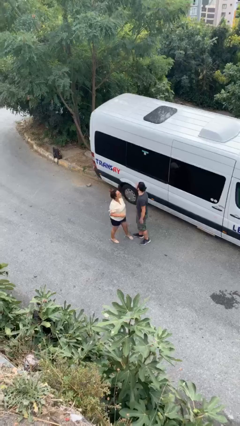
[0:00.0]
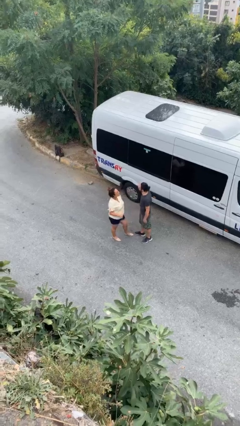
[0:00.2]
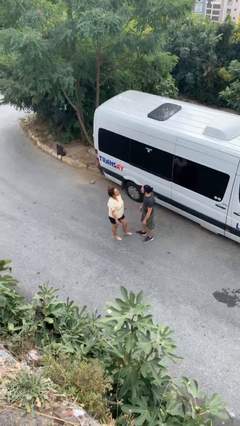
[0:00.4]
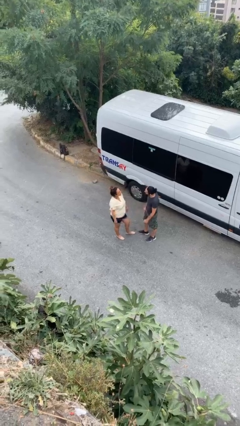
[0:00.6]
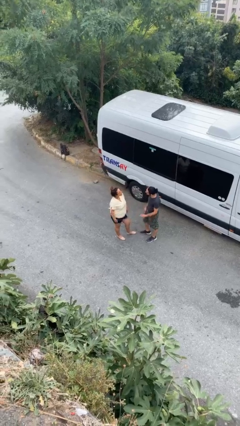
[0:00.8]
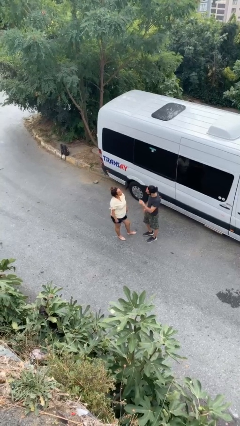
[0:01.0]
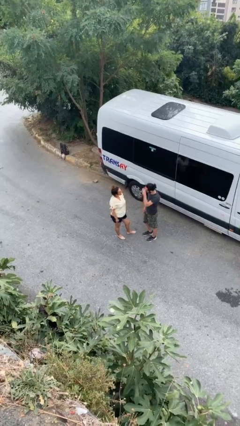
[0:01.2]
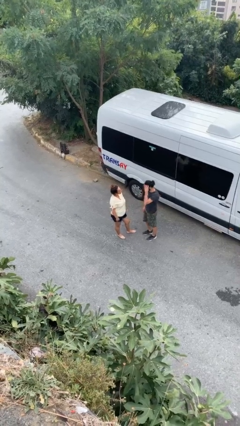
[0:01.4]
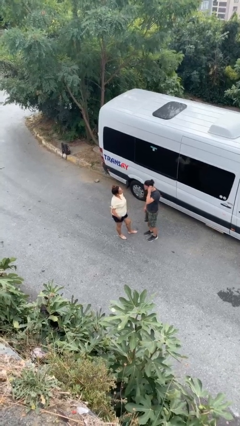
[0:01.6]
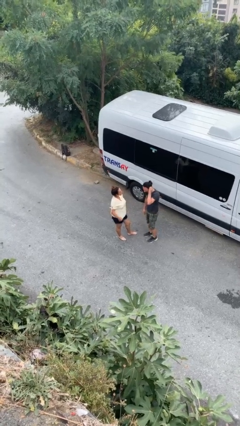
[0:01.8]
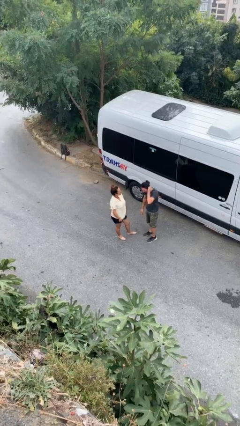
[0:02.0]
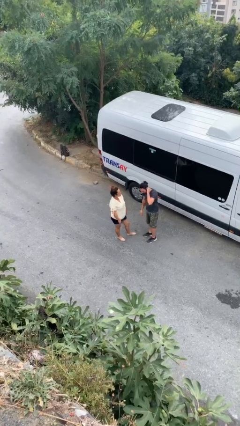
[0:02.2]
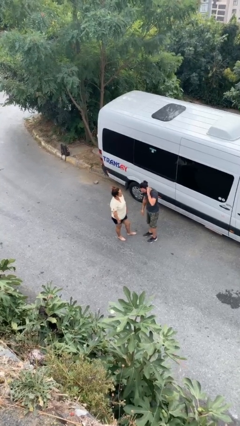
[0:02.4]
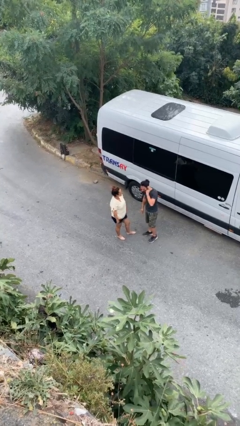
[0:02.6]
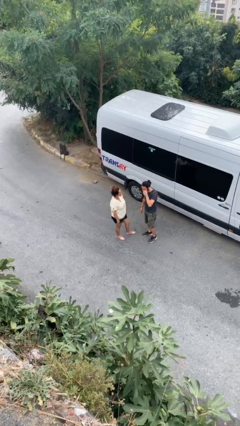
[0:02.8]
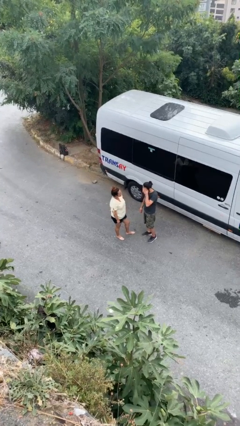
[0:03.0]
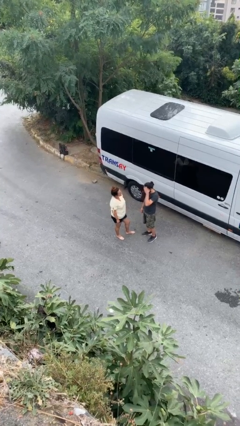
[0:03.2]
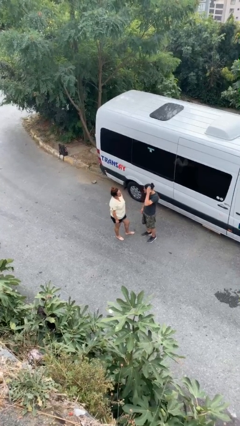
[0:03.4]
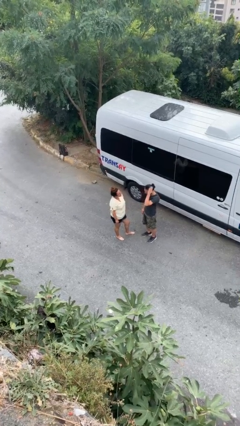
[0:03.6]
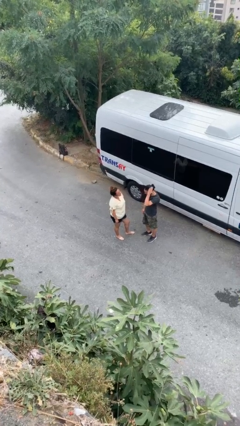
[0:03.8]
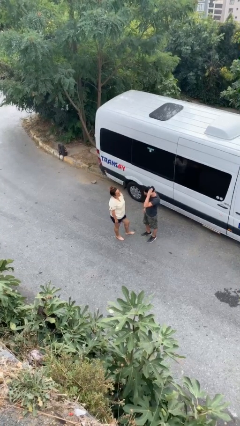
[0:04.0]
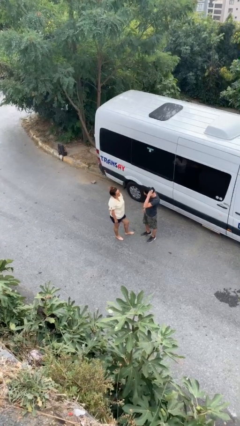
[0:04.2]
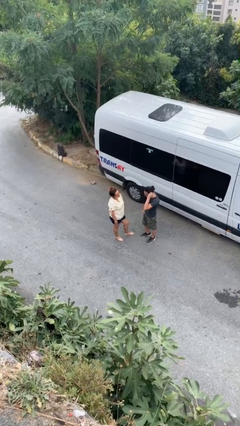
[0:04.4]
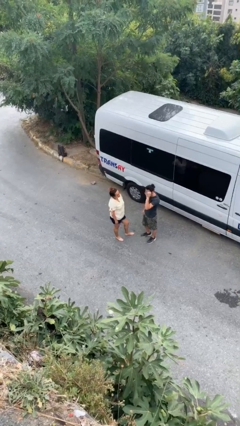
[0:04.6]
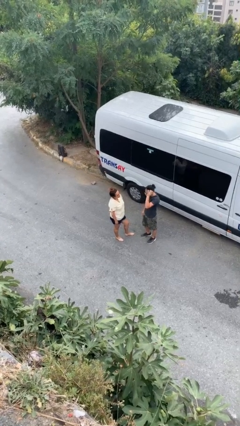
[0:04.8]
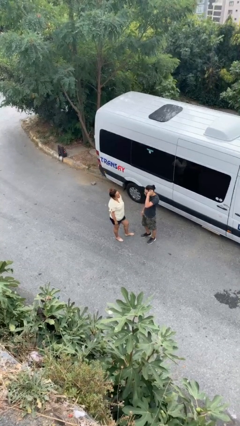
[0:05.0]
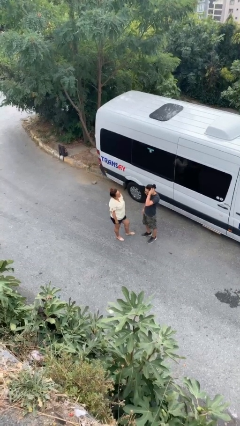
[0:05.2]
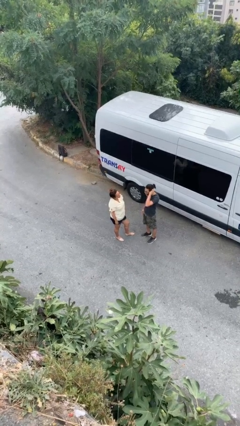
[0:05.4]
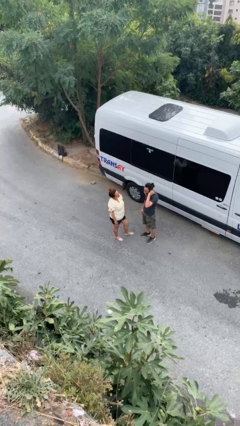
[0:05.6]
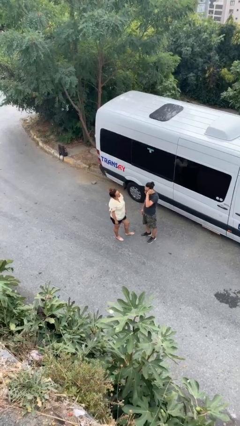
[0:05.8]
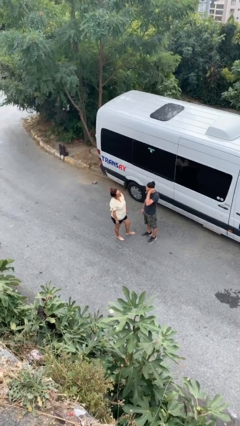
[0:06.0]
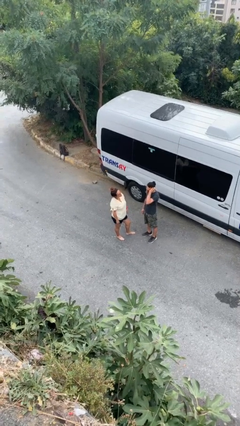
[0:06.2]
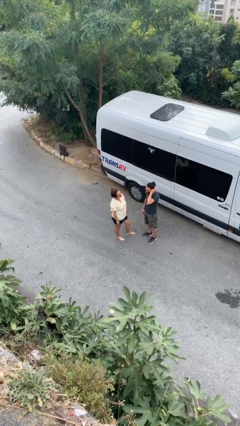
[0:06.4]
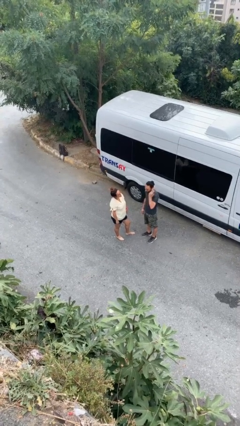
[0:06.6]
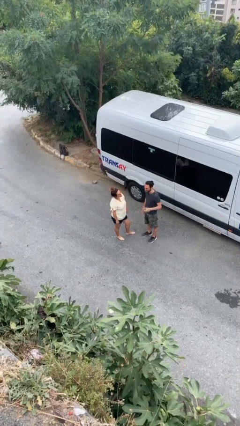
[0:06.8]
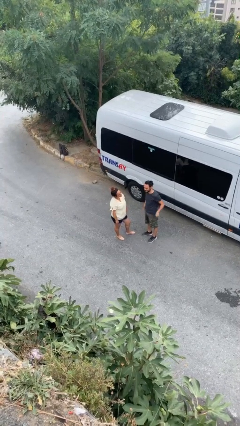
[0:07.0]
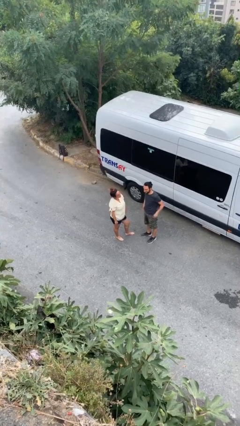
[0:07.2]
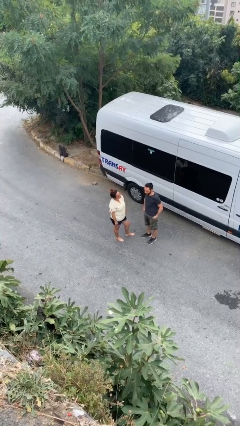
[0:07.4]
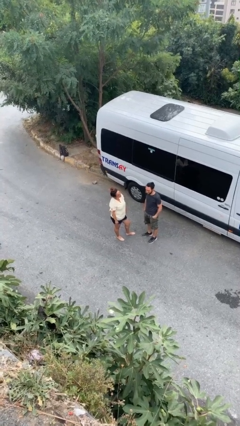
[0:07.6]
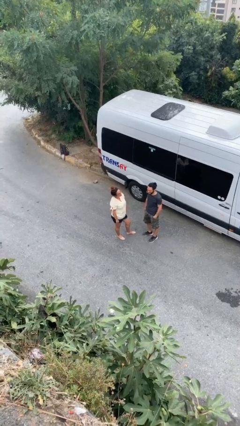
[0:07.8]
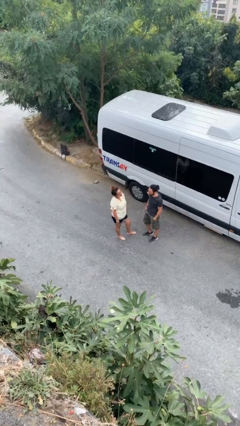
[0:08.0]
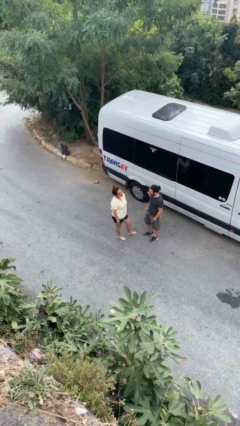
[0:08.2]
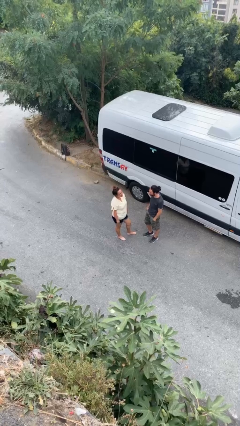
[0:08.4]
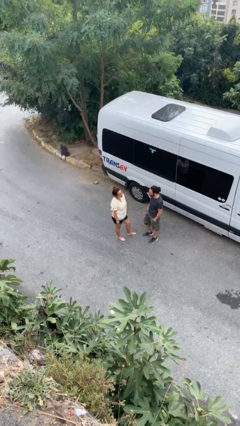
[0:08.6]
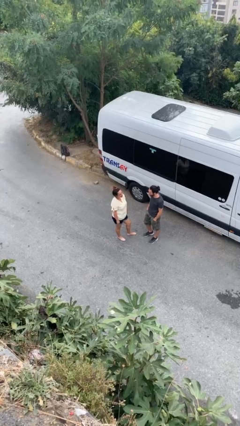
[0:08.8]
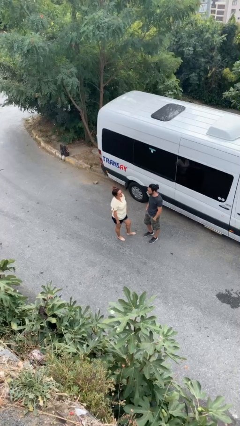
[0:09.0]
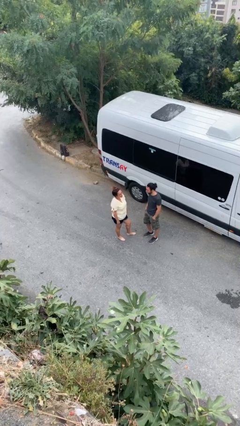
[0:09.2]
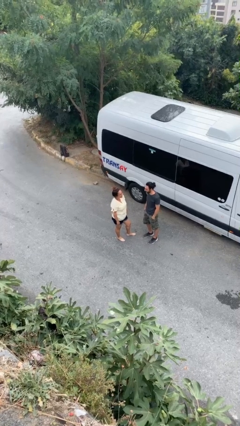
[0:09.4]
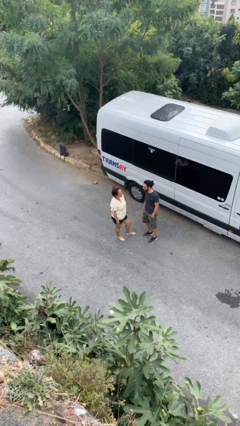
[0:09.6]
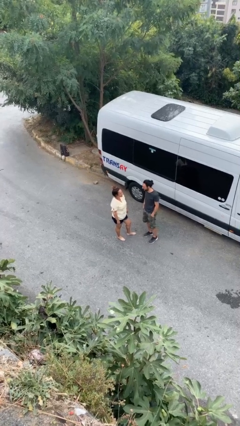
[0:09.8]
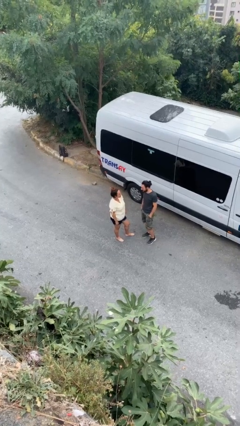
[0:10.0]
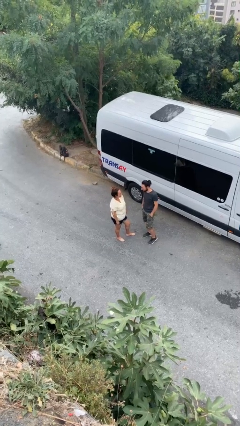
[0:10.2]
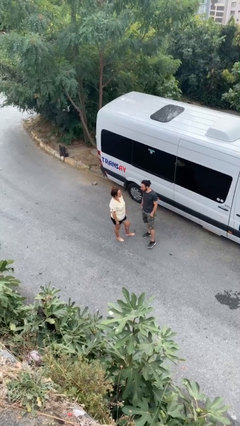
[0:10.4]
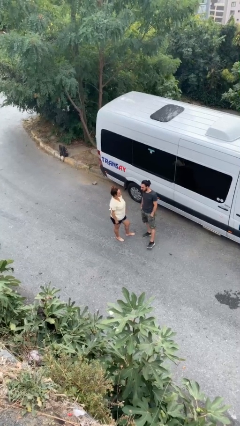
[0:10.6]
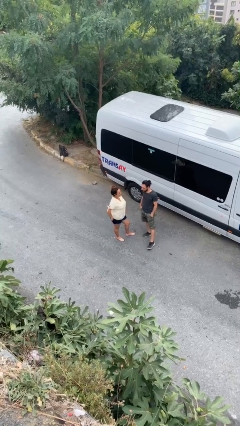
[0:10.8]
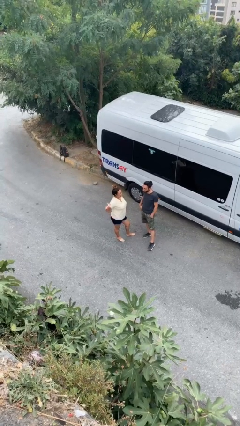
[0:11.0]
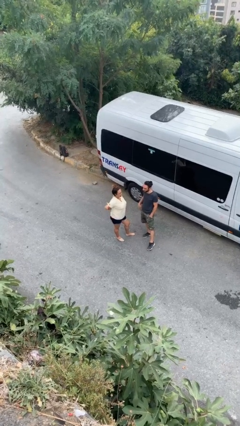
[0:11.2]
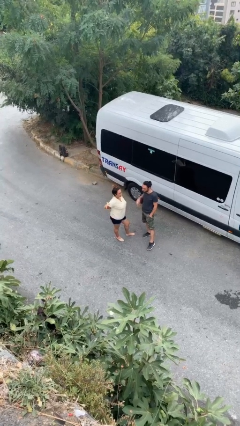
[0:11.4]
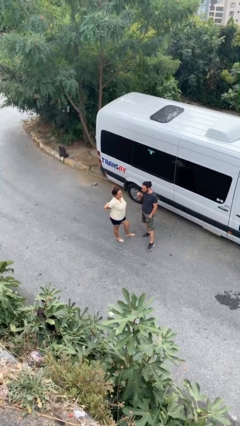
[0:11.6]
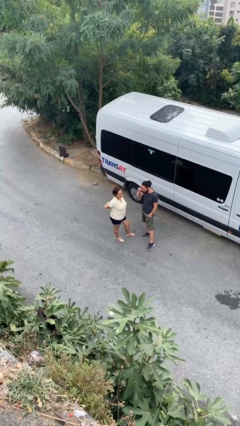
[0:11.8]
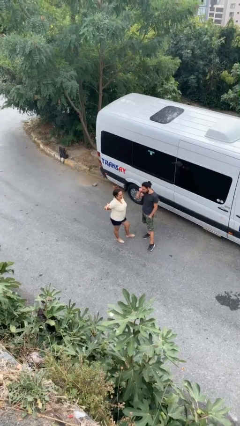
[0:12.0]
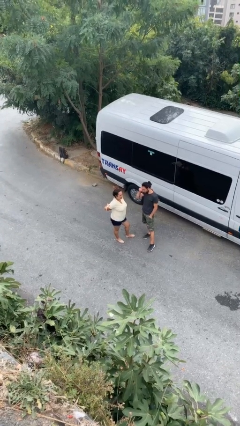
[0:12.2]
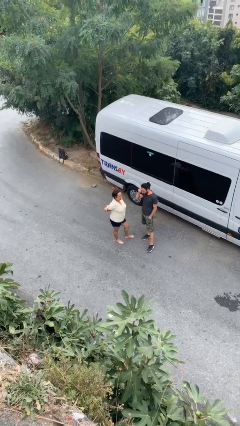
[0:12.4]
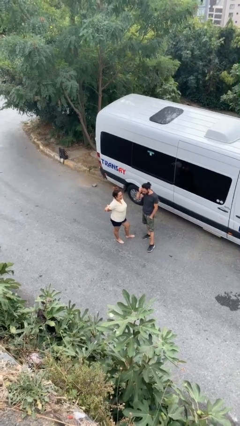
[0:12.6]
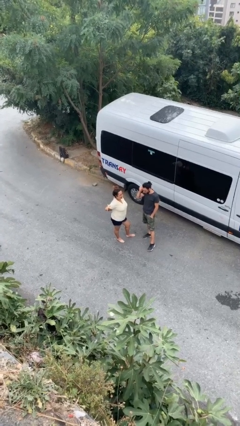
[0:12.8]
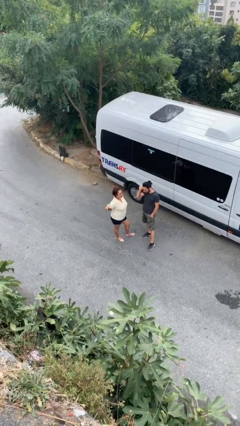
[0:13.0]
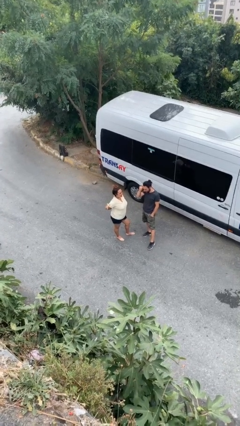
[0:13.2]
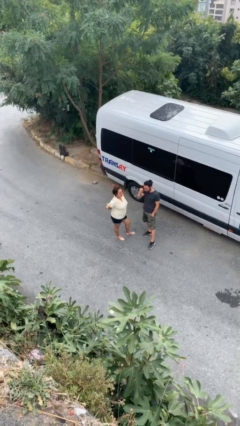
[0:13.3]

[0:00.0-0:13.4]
person talks to person

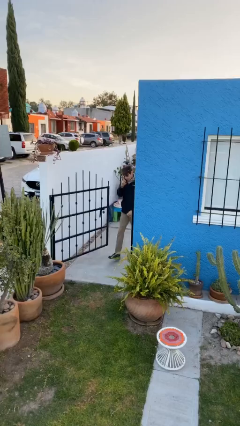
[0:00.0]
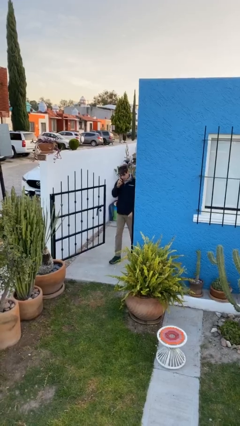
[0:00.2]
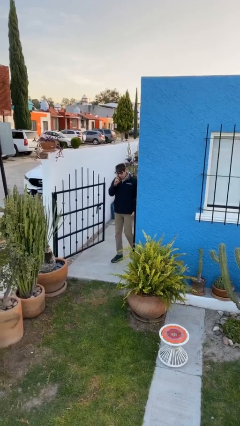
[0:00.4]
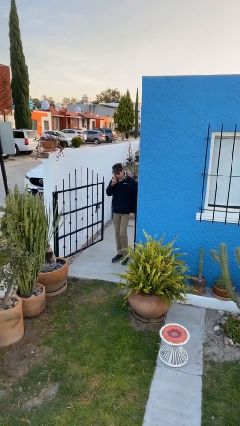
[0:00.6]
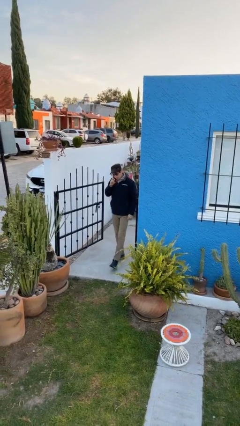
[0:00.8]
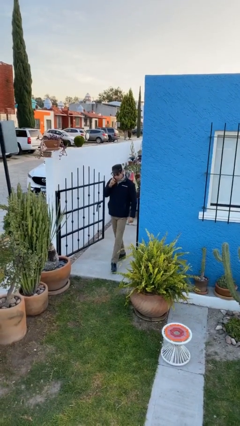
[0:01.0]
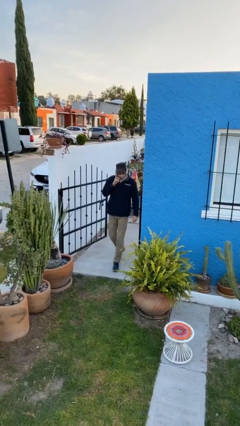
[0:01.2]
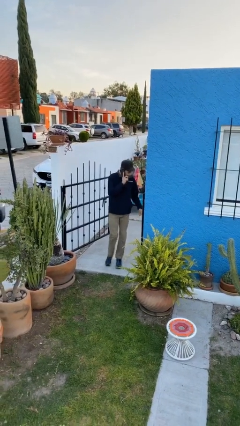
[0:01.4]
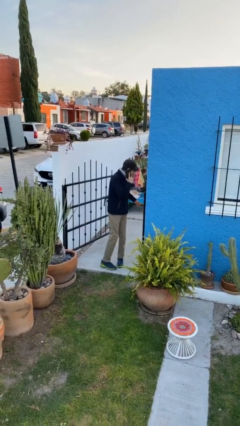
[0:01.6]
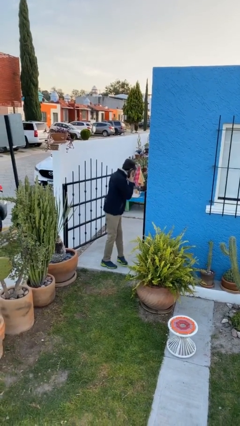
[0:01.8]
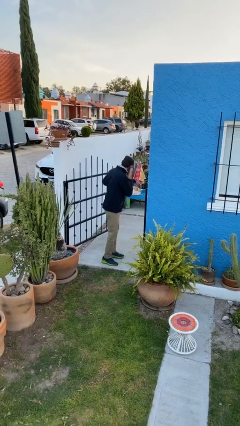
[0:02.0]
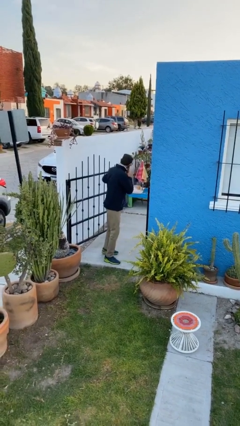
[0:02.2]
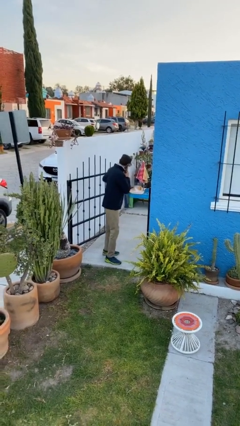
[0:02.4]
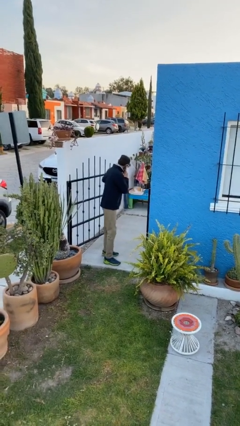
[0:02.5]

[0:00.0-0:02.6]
person enters scene through structure

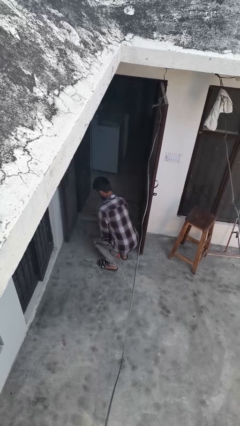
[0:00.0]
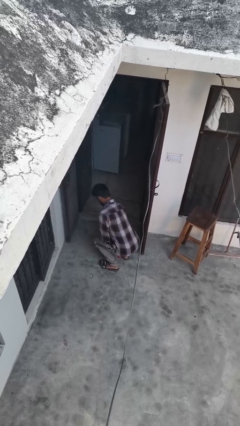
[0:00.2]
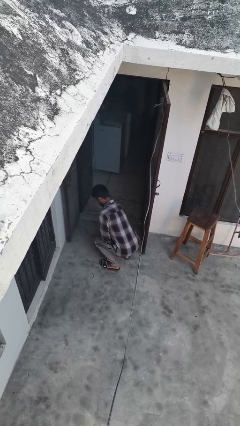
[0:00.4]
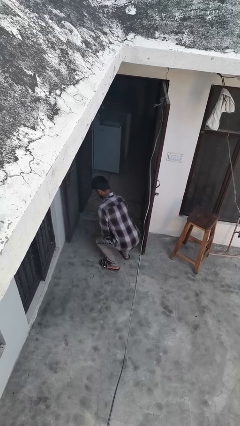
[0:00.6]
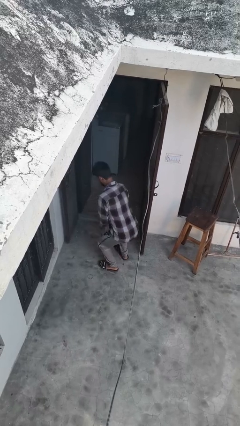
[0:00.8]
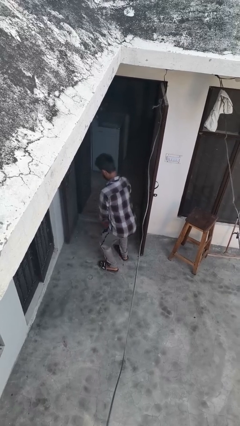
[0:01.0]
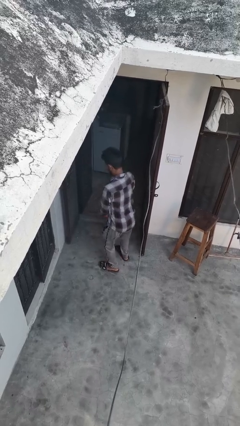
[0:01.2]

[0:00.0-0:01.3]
person picks up object from floor

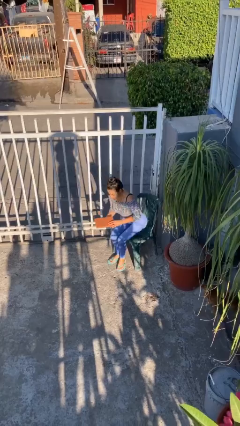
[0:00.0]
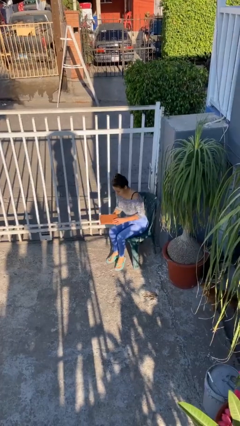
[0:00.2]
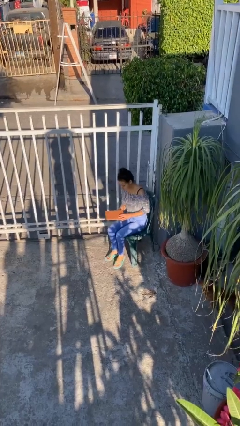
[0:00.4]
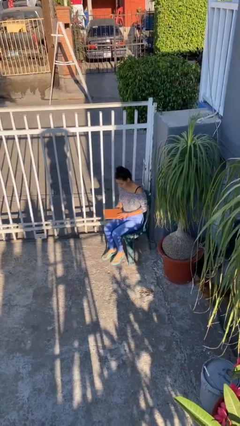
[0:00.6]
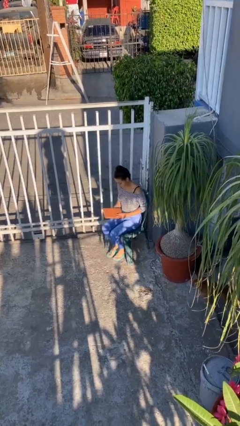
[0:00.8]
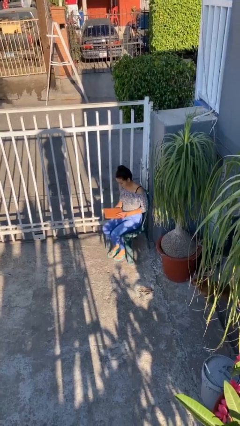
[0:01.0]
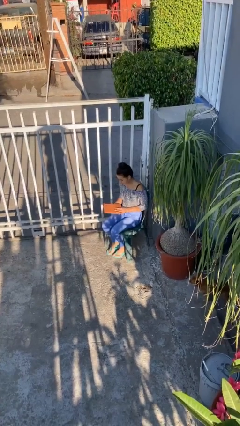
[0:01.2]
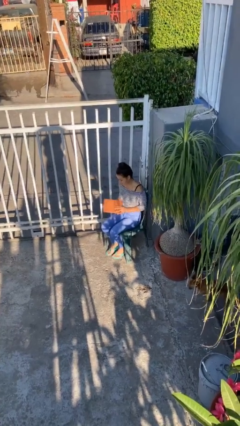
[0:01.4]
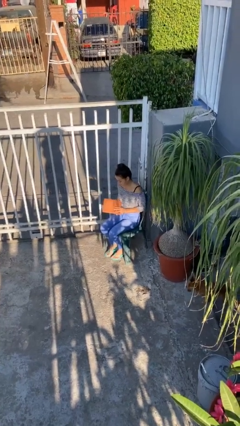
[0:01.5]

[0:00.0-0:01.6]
person sits down
